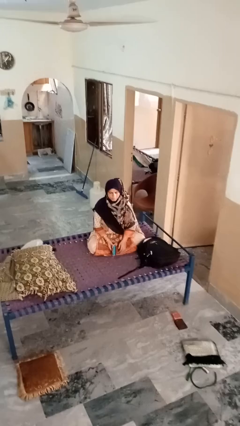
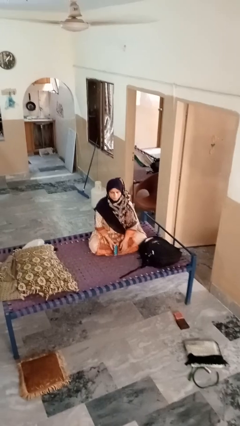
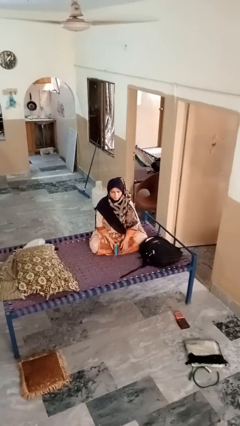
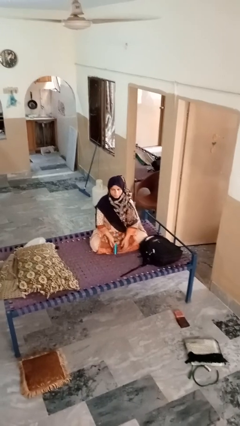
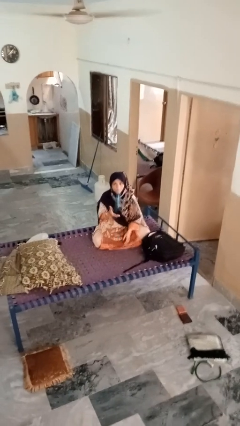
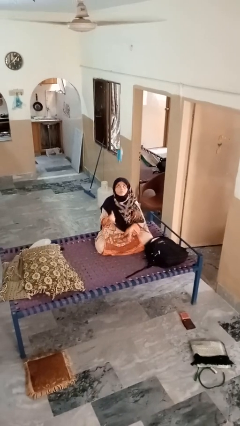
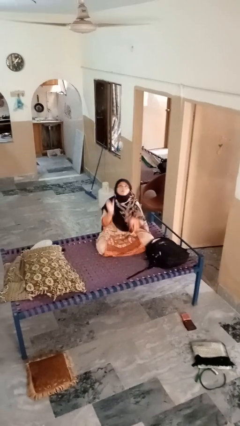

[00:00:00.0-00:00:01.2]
person drops object

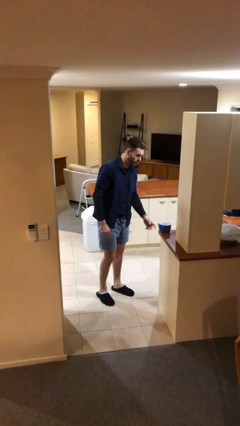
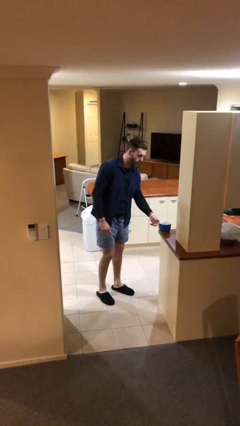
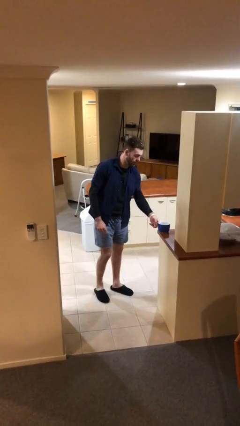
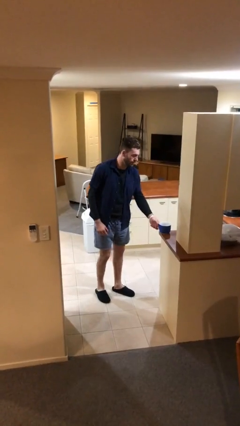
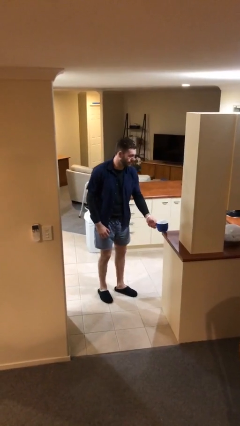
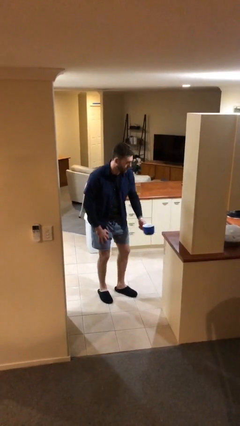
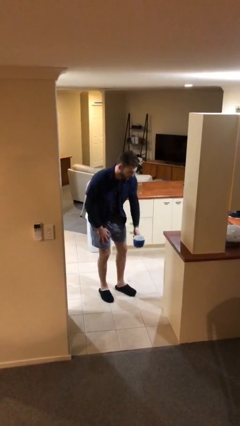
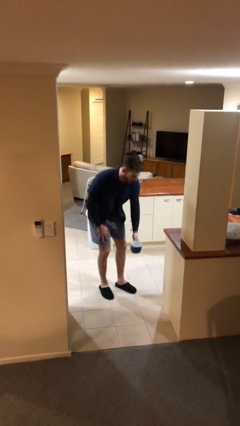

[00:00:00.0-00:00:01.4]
person picks up object from table

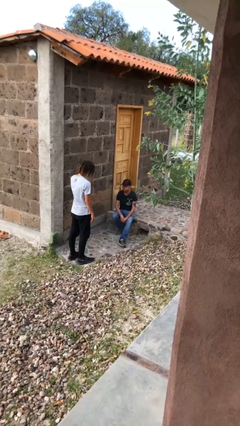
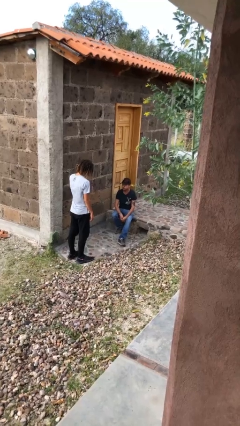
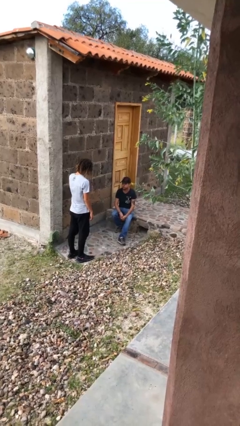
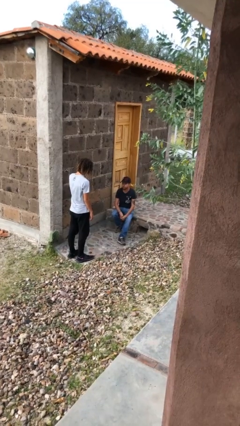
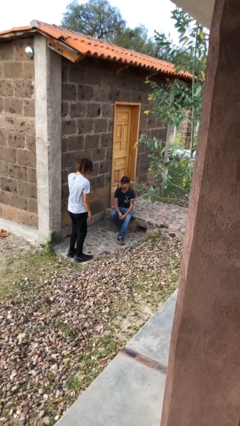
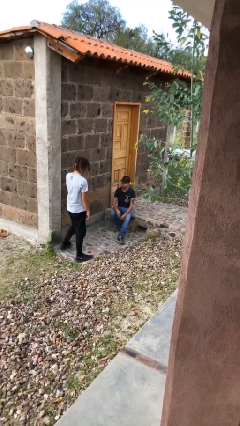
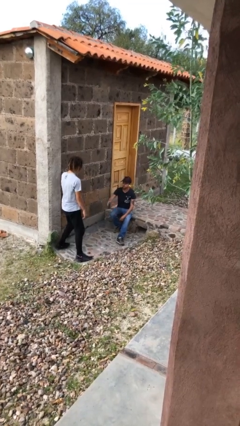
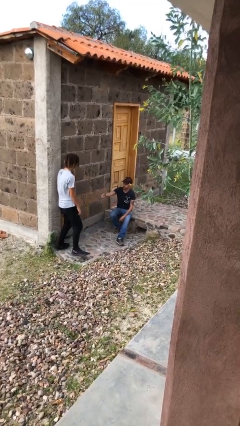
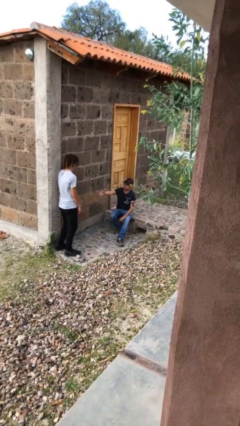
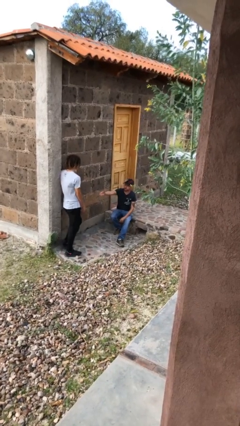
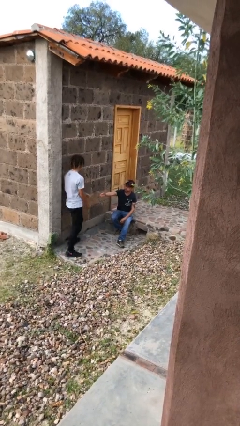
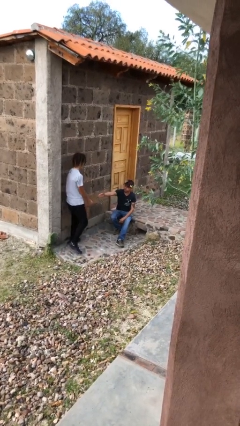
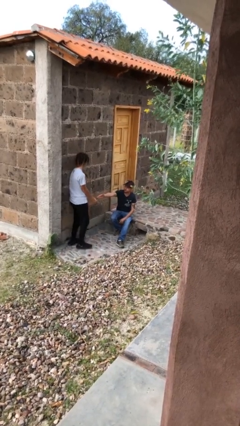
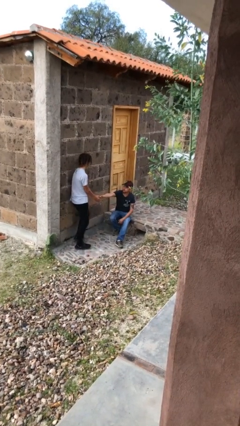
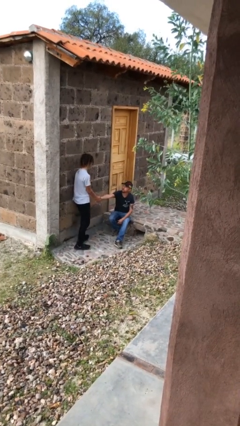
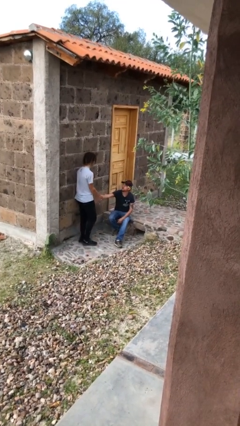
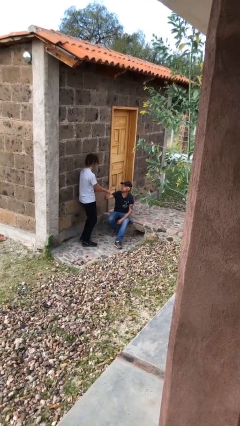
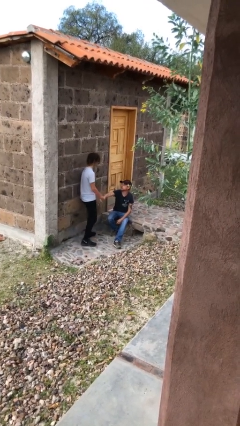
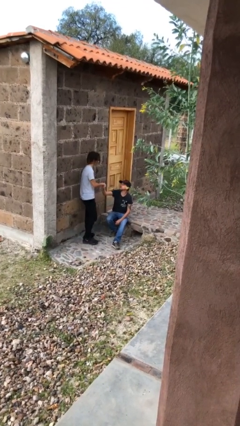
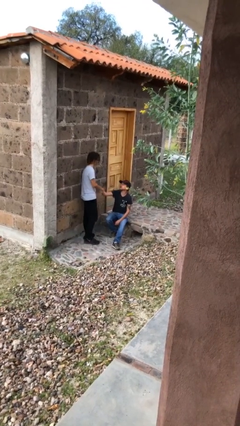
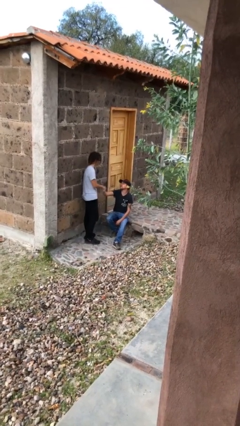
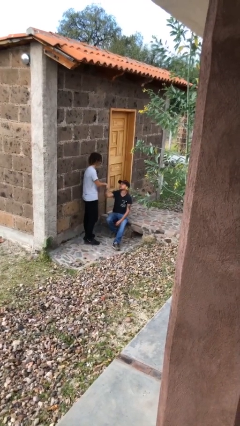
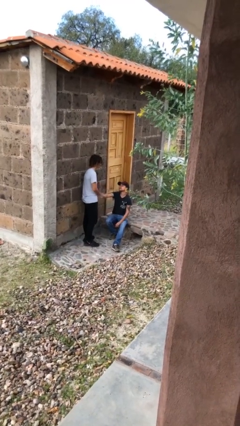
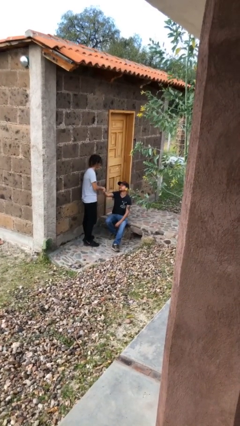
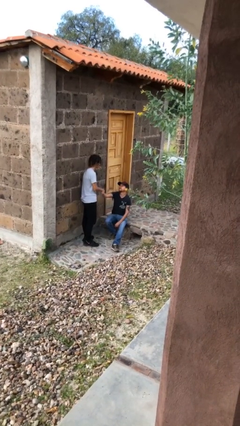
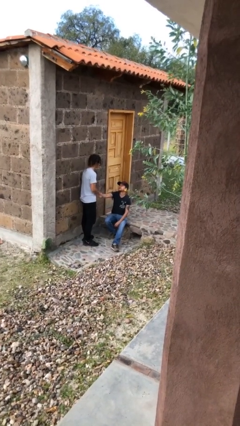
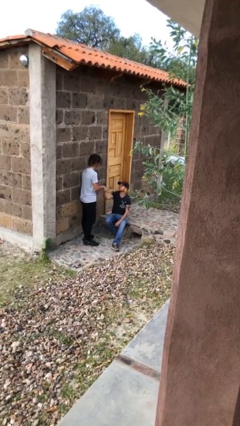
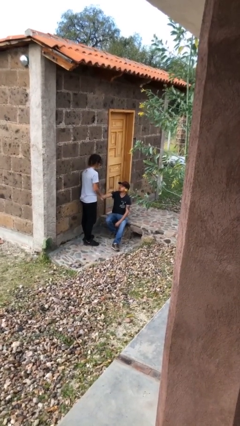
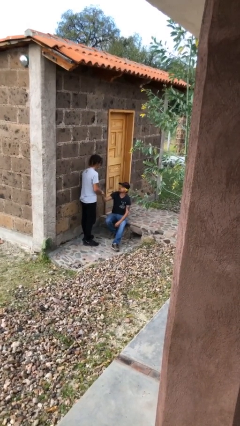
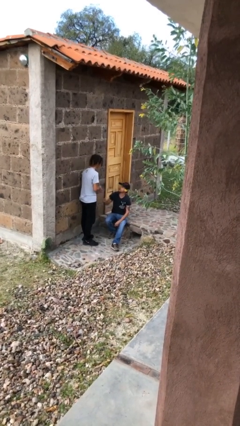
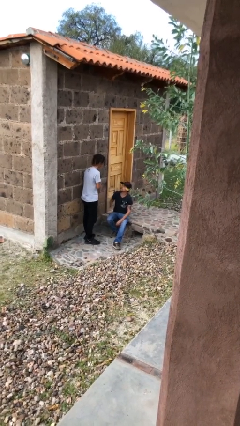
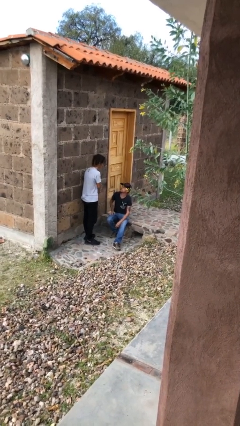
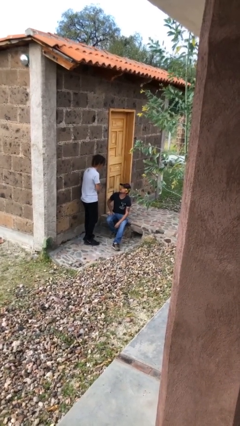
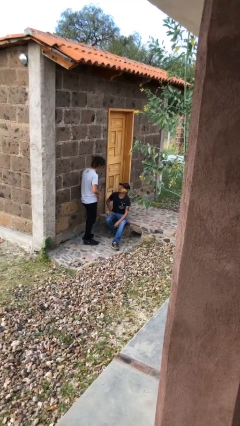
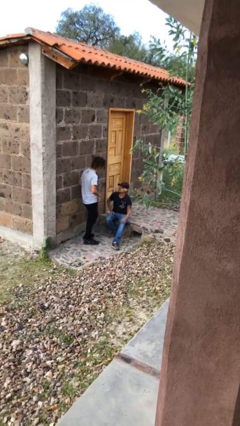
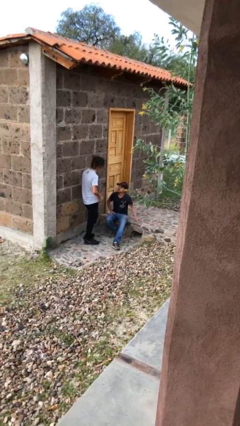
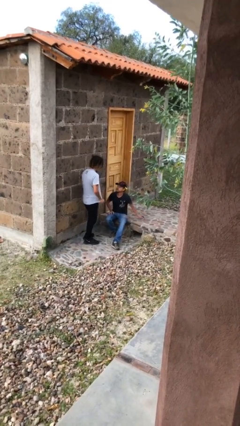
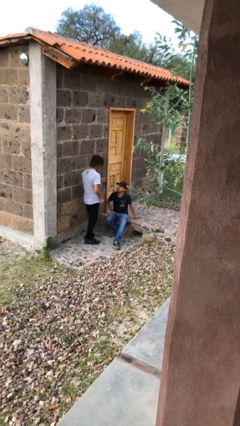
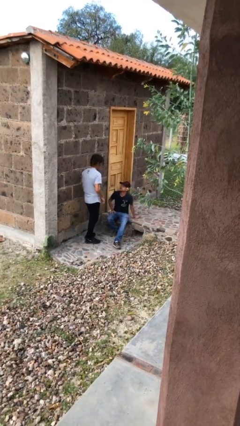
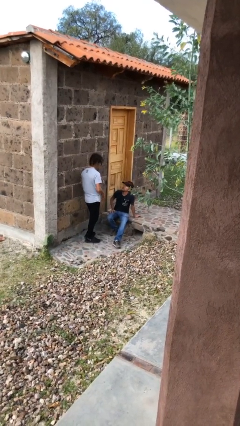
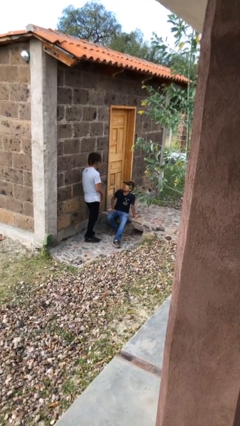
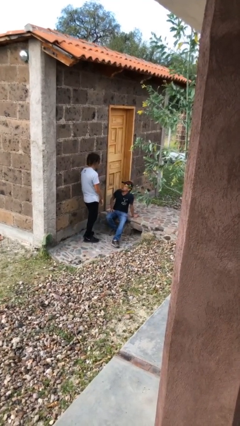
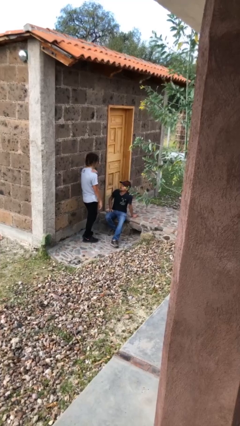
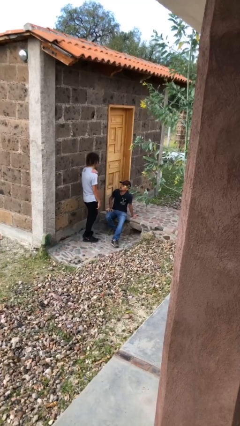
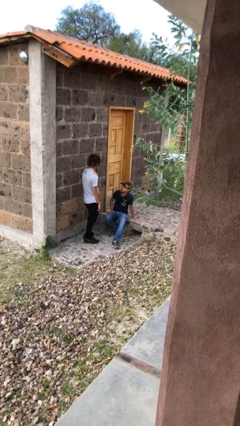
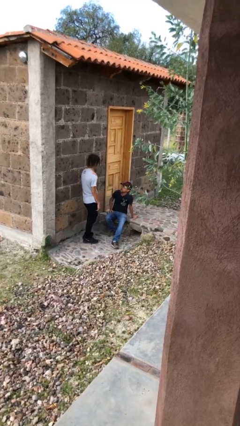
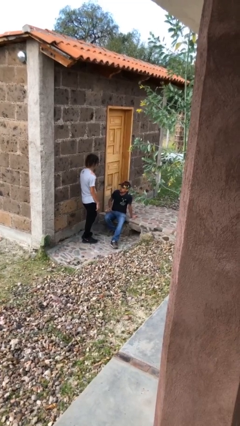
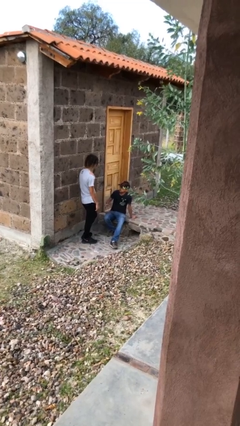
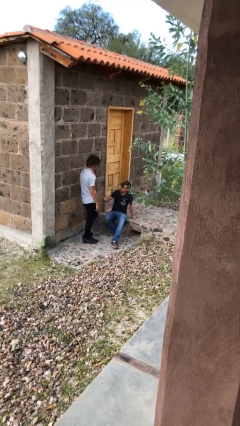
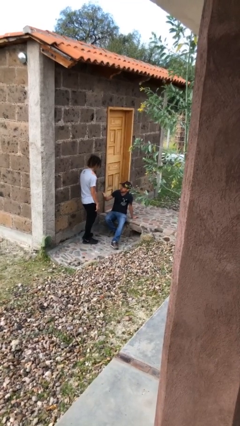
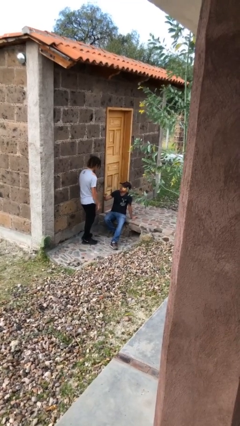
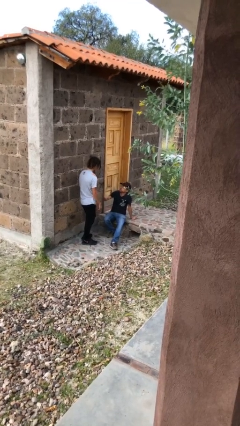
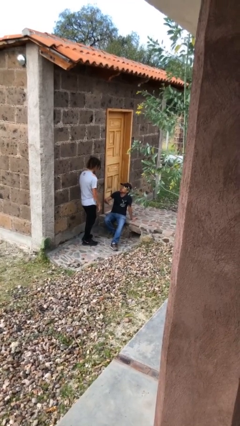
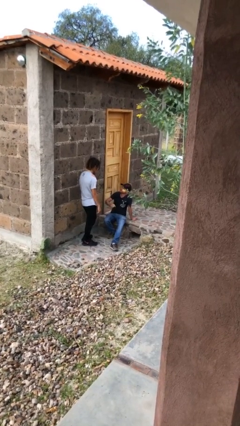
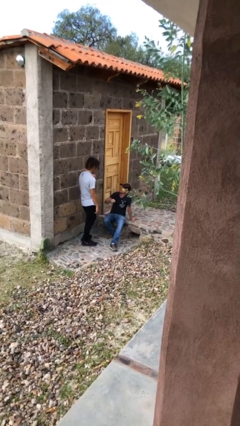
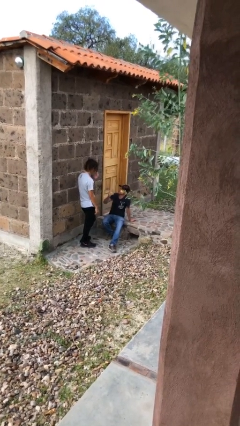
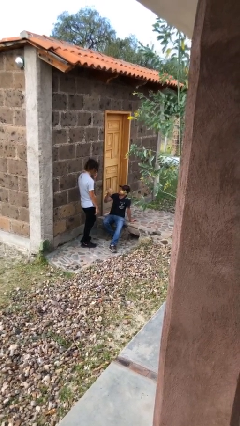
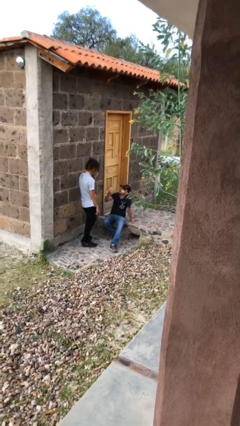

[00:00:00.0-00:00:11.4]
person shakes hand

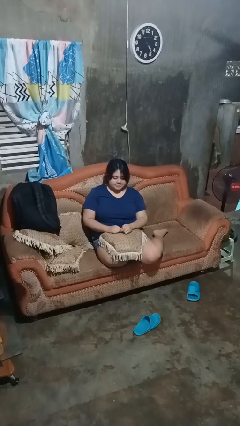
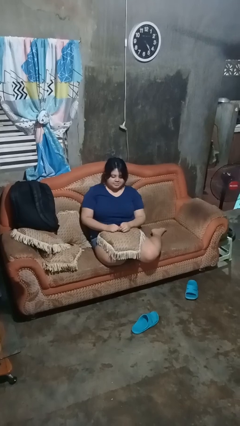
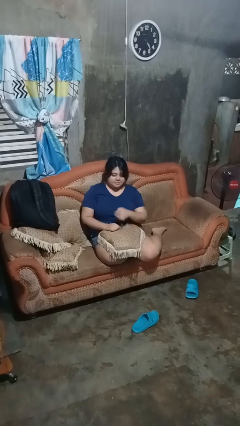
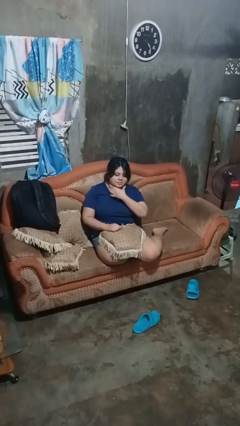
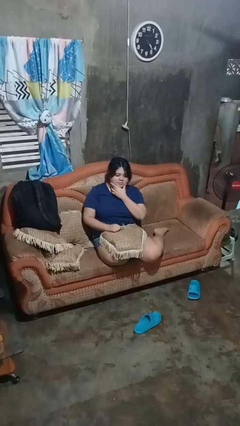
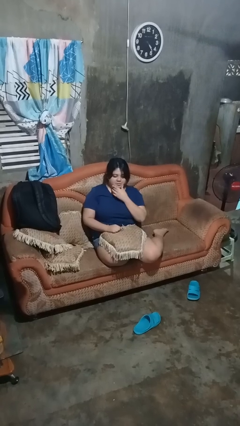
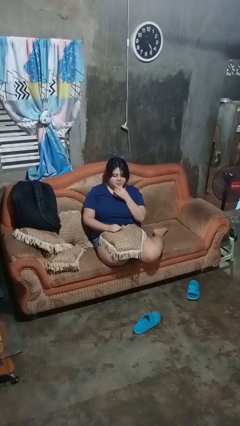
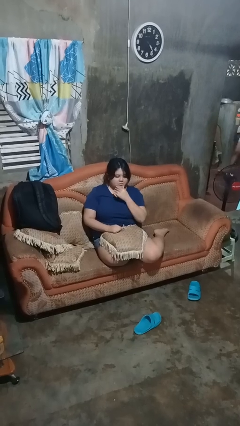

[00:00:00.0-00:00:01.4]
person strokes chin

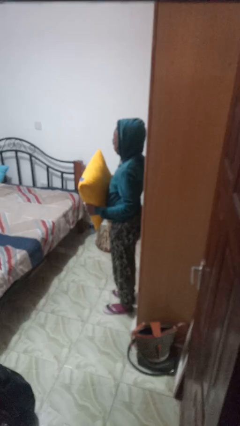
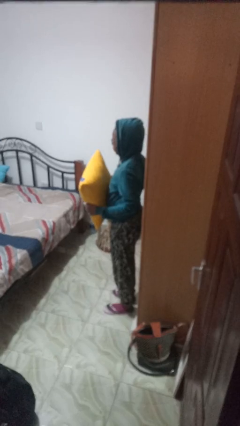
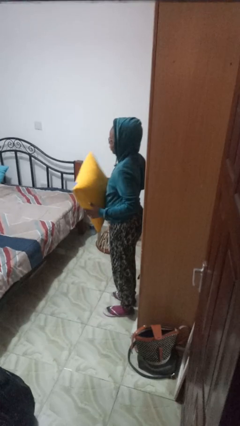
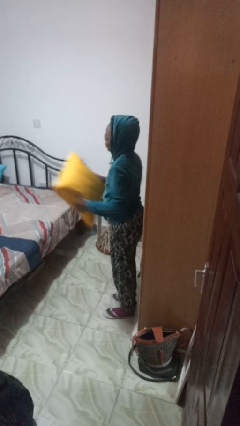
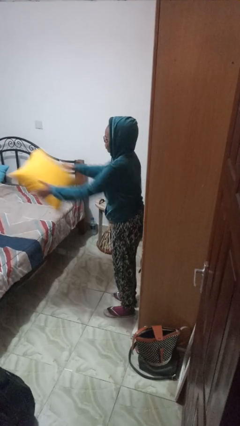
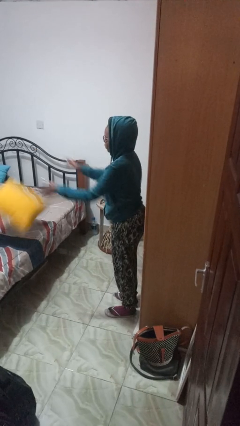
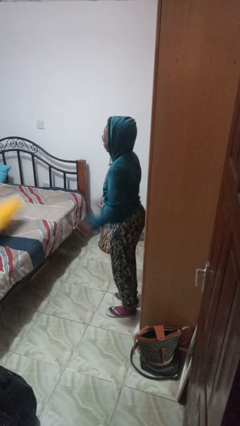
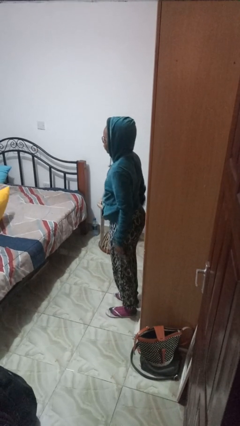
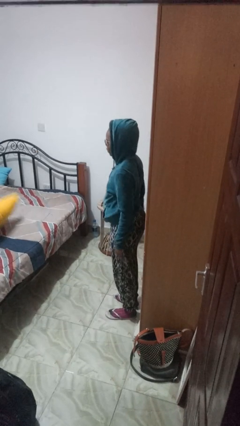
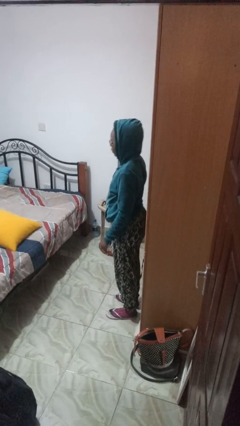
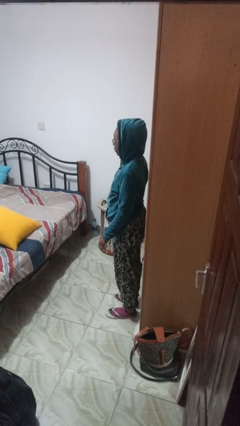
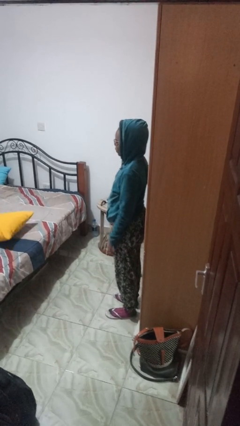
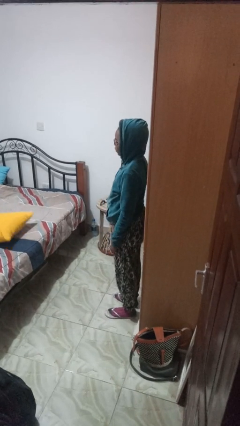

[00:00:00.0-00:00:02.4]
person throws object on bed
